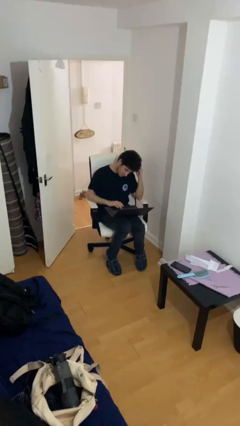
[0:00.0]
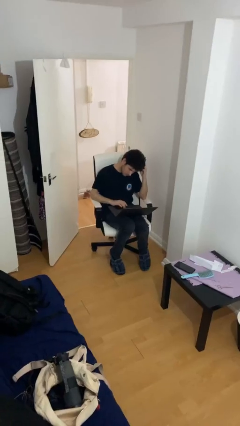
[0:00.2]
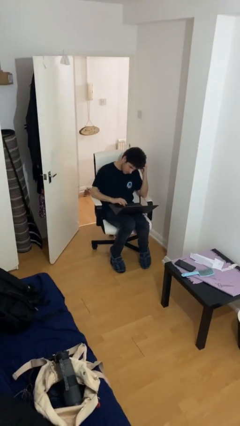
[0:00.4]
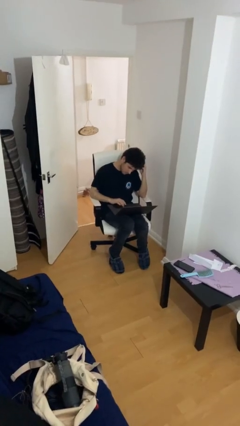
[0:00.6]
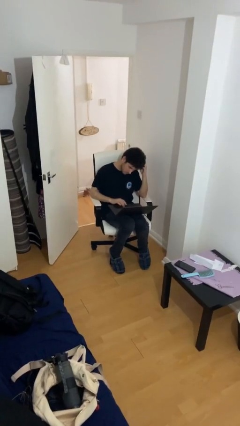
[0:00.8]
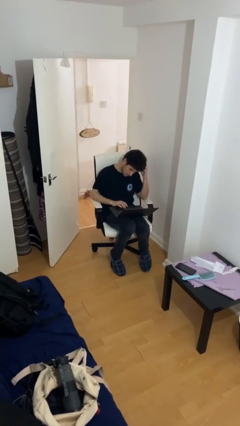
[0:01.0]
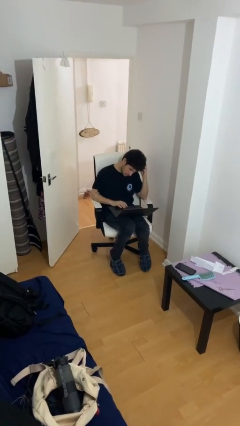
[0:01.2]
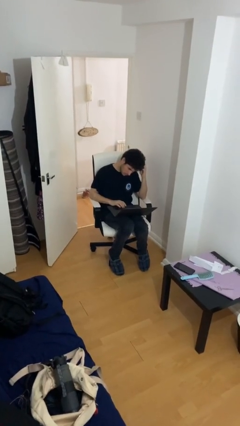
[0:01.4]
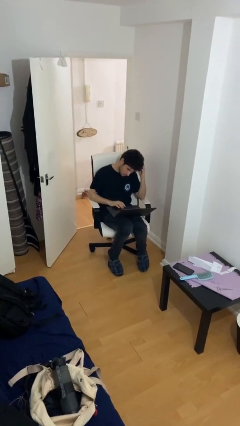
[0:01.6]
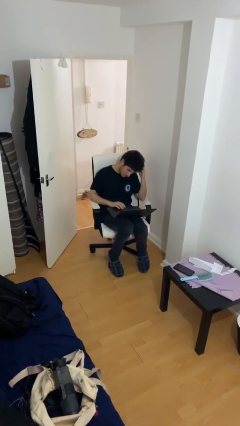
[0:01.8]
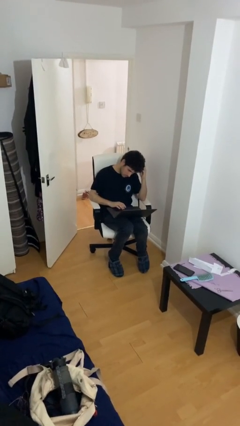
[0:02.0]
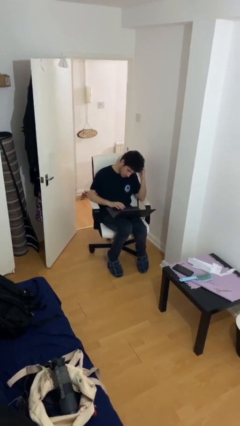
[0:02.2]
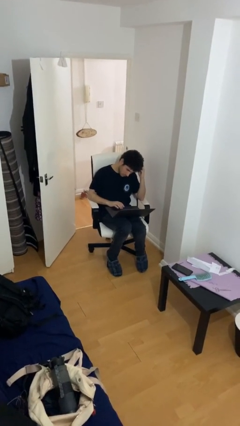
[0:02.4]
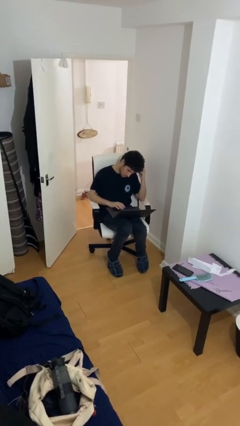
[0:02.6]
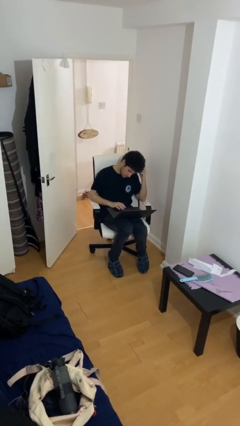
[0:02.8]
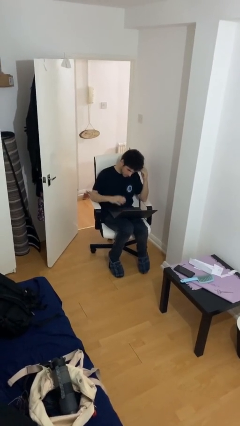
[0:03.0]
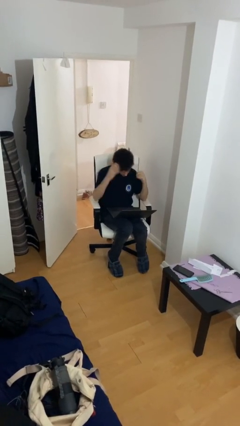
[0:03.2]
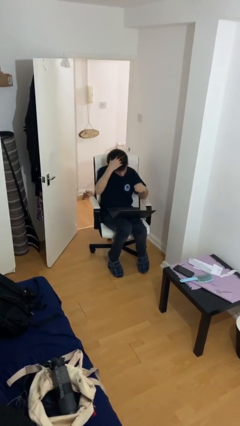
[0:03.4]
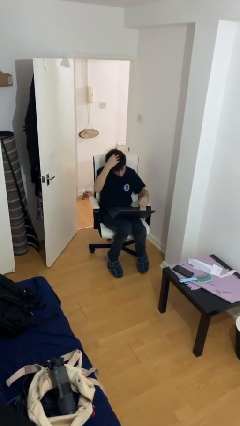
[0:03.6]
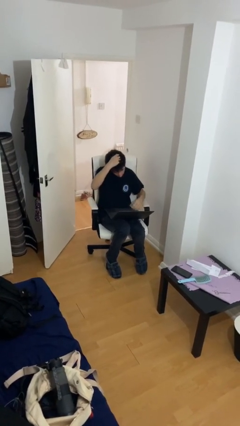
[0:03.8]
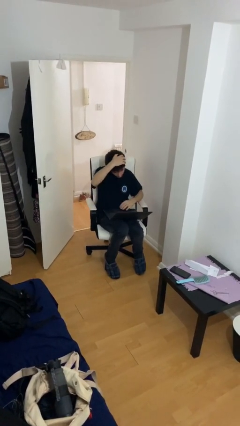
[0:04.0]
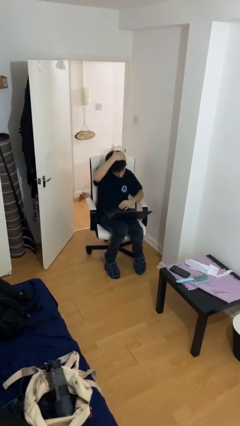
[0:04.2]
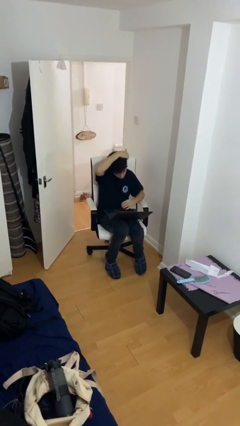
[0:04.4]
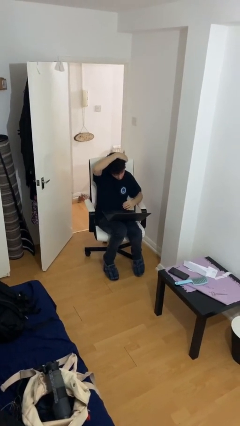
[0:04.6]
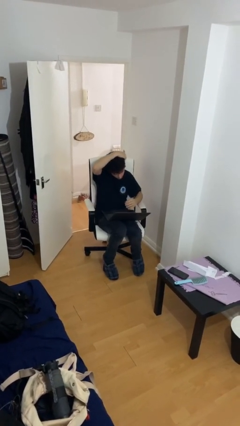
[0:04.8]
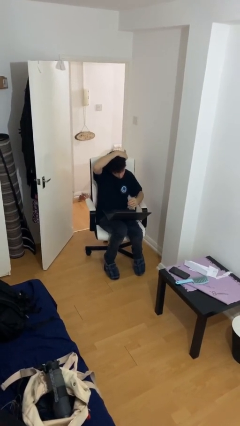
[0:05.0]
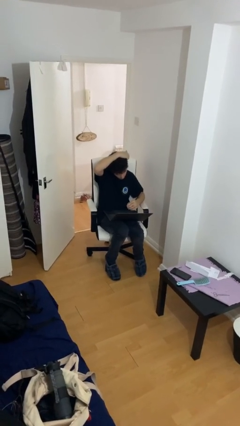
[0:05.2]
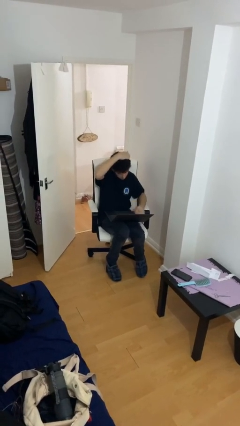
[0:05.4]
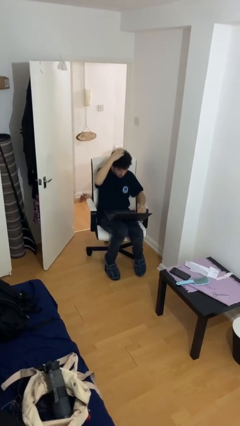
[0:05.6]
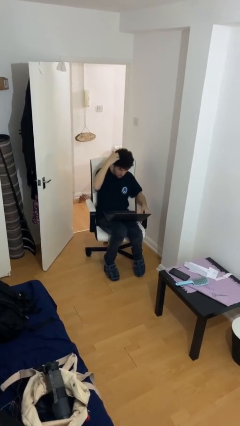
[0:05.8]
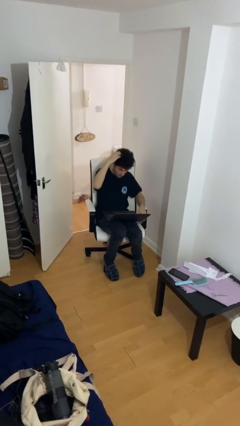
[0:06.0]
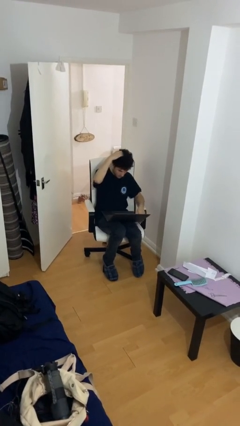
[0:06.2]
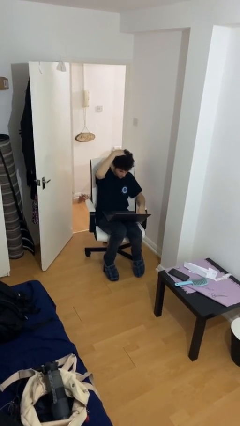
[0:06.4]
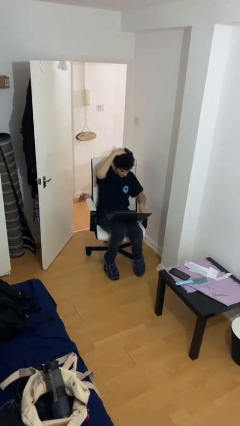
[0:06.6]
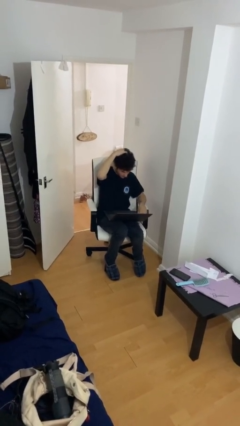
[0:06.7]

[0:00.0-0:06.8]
person interacts with laptop

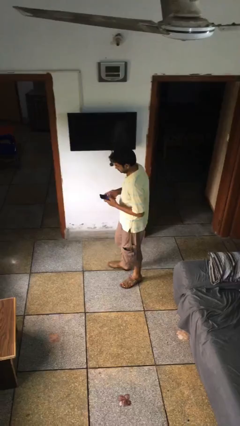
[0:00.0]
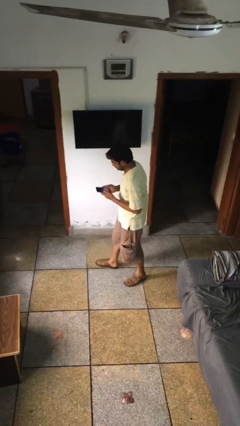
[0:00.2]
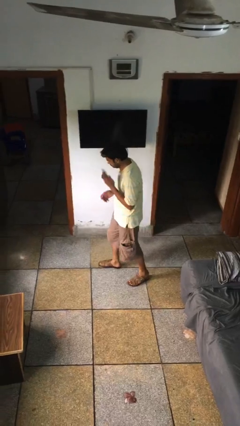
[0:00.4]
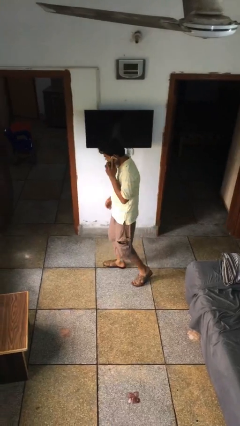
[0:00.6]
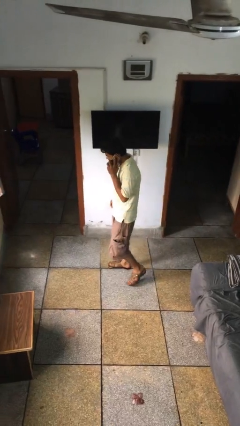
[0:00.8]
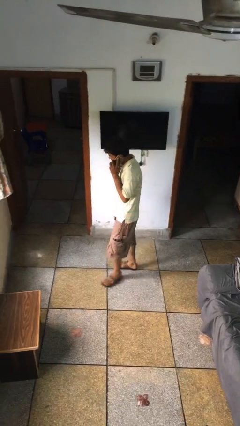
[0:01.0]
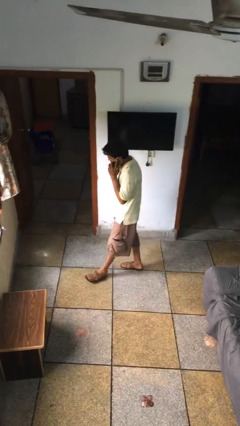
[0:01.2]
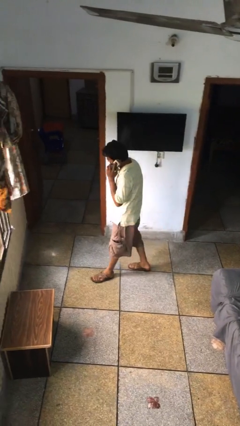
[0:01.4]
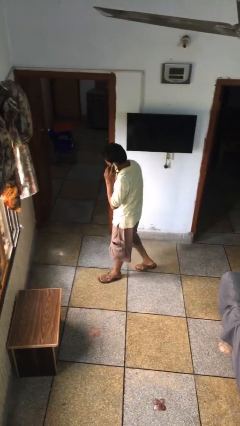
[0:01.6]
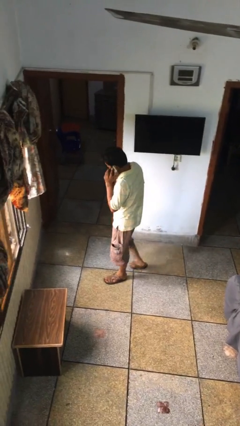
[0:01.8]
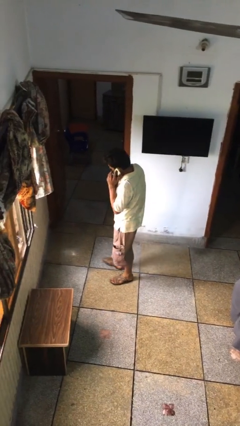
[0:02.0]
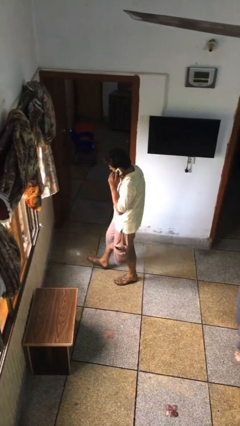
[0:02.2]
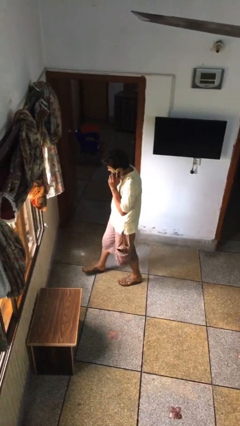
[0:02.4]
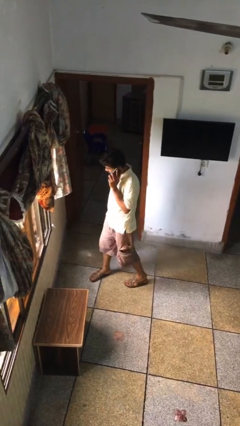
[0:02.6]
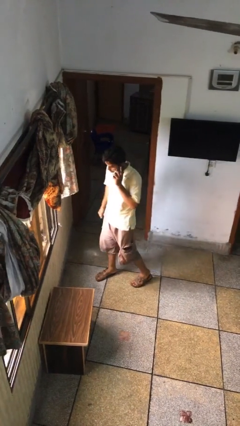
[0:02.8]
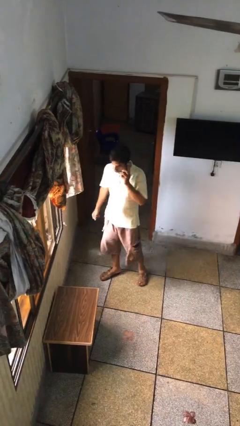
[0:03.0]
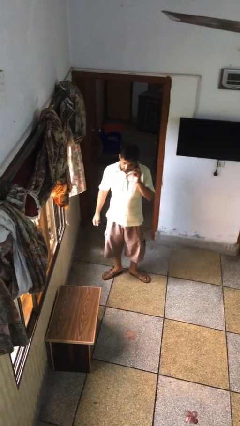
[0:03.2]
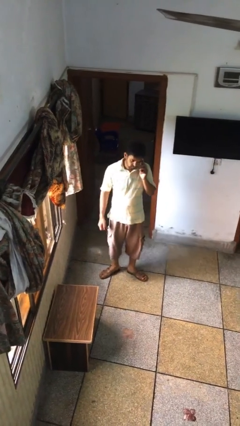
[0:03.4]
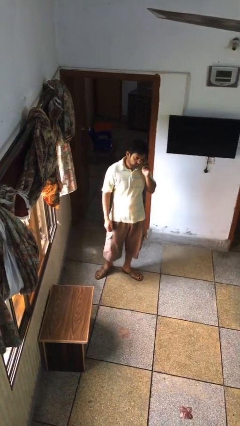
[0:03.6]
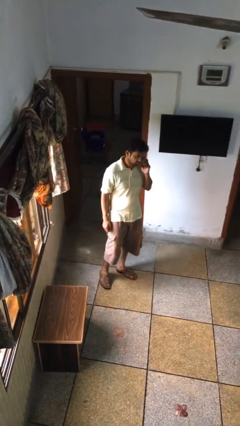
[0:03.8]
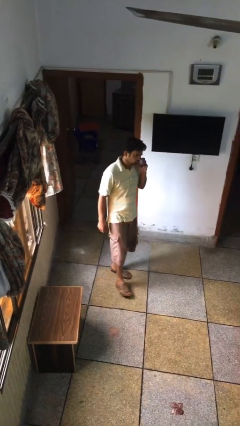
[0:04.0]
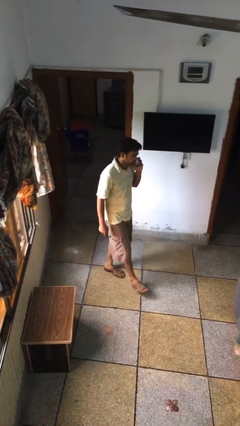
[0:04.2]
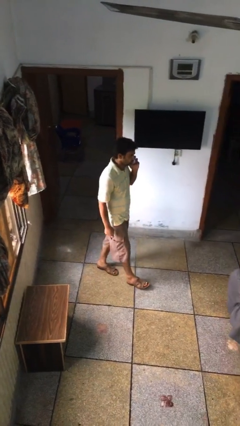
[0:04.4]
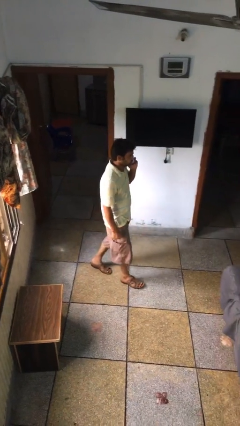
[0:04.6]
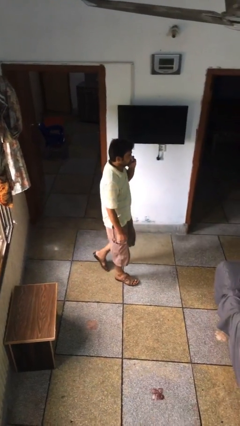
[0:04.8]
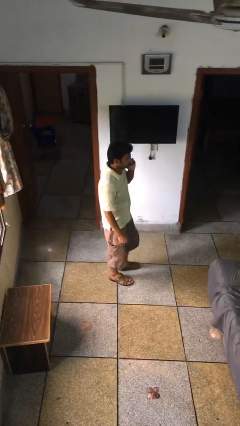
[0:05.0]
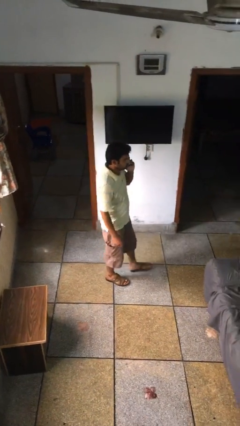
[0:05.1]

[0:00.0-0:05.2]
person talks on phone

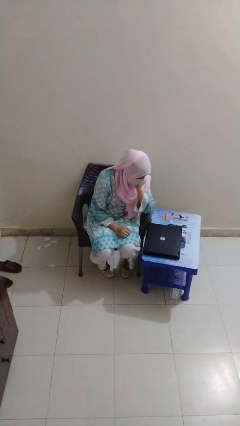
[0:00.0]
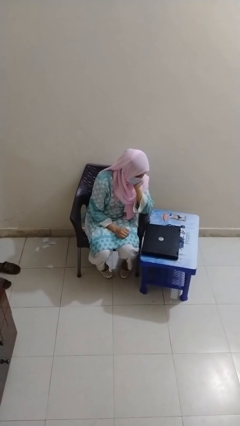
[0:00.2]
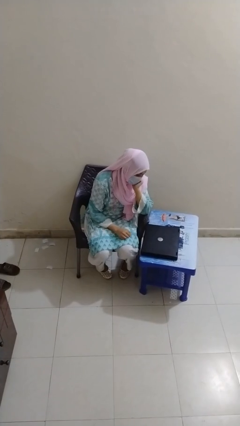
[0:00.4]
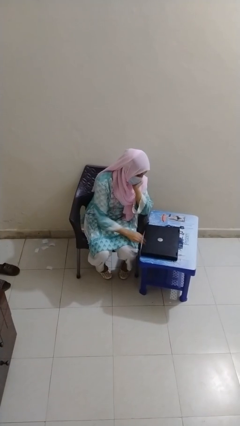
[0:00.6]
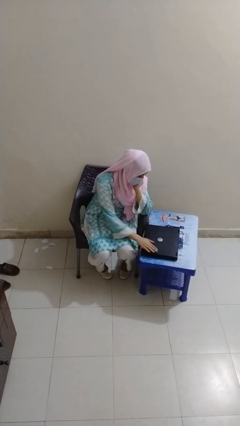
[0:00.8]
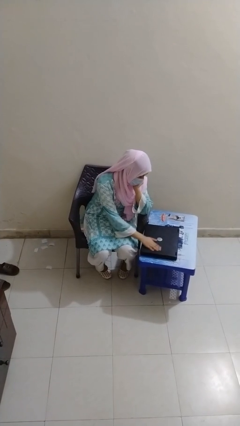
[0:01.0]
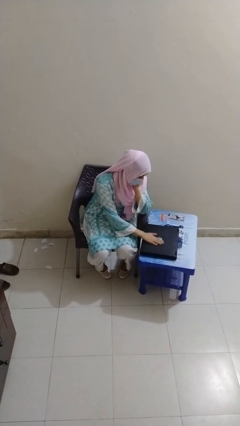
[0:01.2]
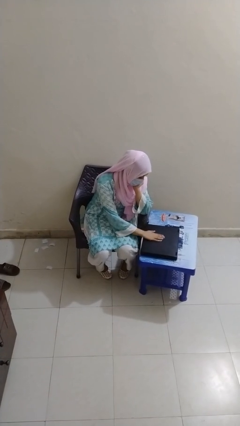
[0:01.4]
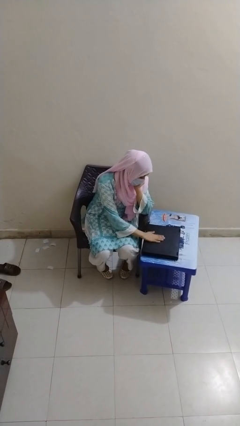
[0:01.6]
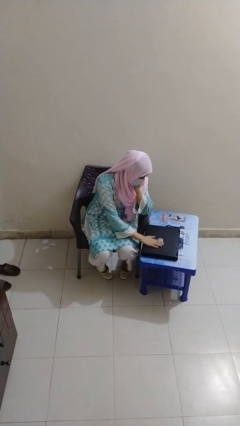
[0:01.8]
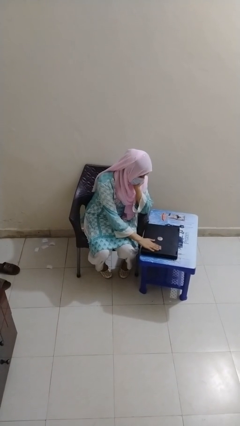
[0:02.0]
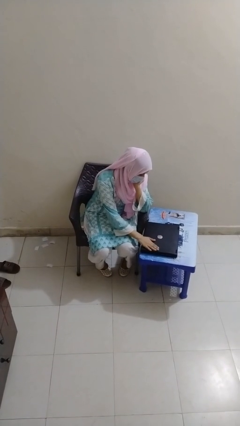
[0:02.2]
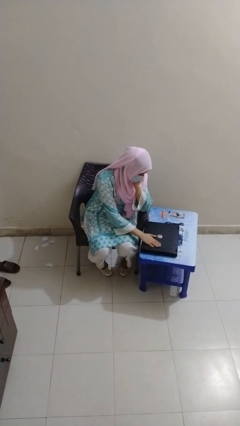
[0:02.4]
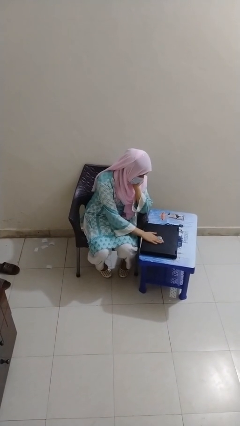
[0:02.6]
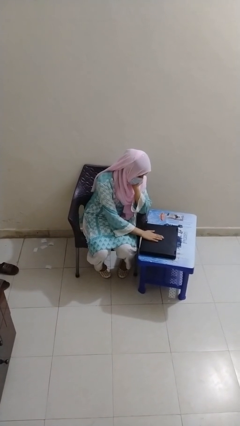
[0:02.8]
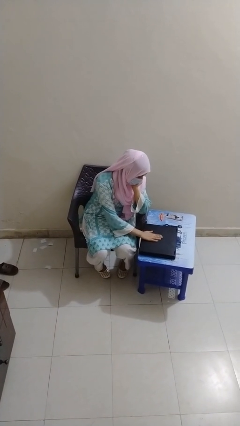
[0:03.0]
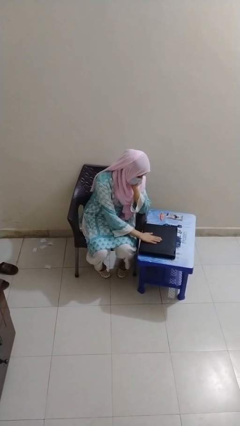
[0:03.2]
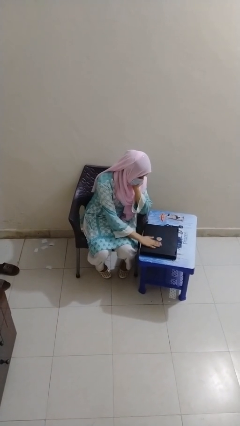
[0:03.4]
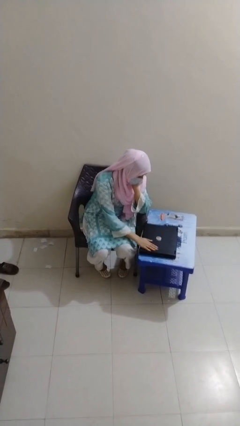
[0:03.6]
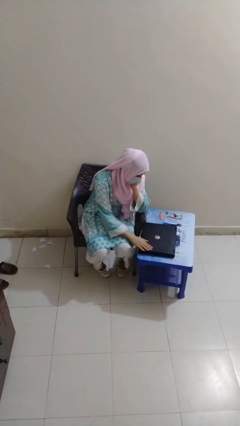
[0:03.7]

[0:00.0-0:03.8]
person waves hand over object

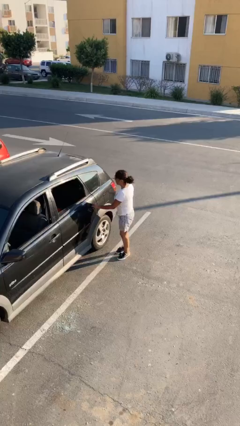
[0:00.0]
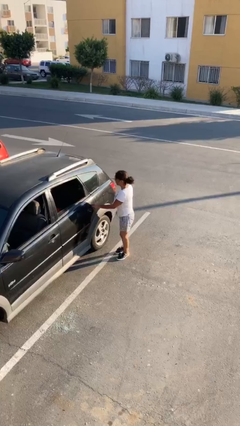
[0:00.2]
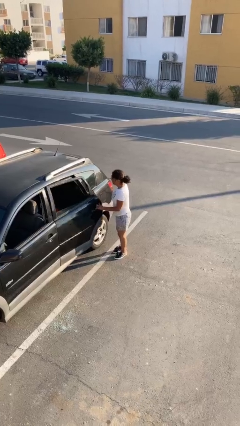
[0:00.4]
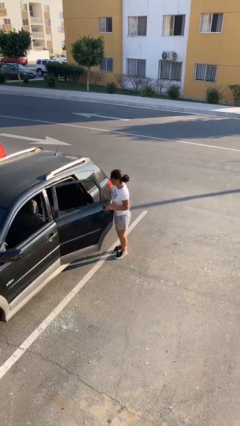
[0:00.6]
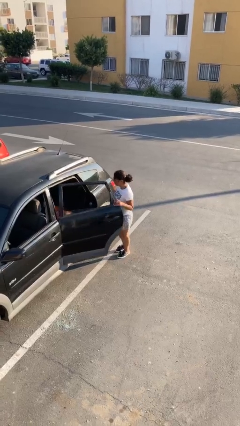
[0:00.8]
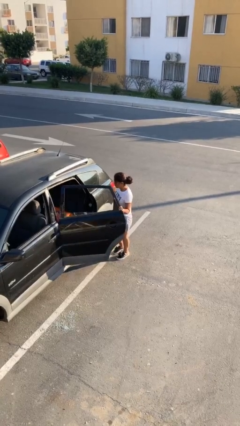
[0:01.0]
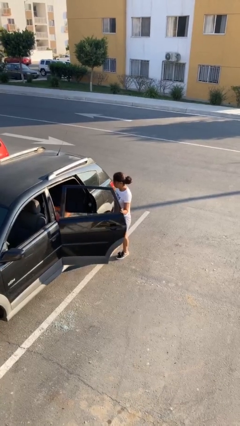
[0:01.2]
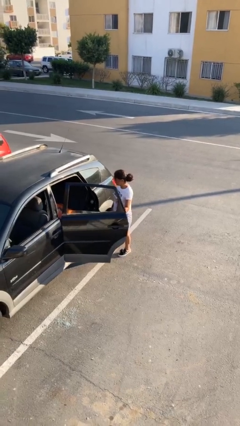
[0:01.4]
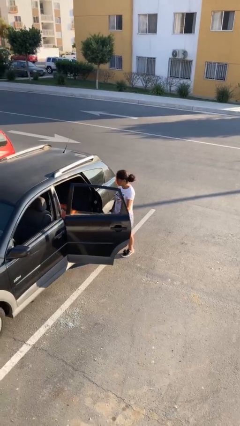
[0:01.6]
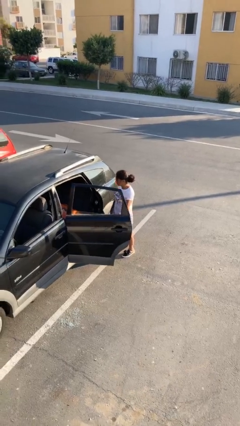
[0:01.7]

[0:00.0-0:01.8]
person opens car door

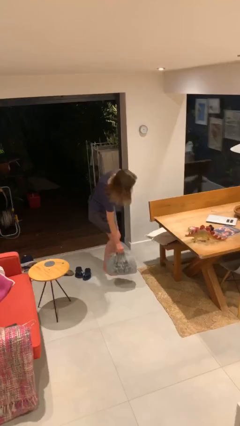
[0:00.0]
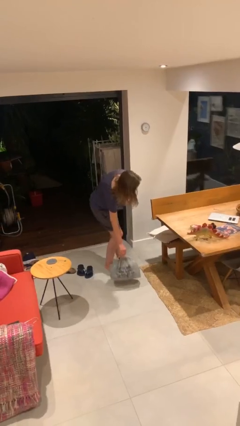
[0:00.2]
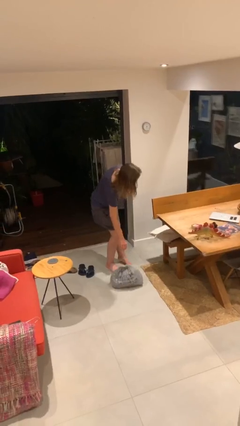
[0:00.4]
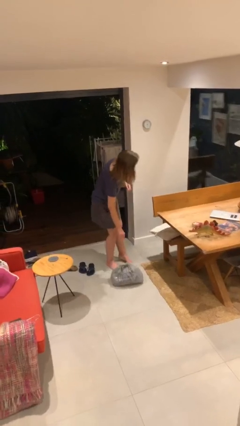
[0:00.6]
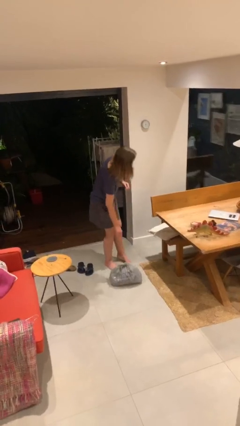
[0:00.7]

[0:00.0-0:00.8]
person puts down object on floor
